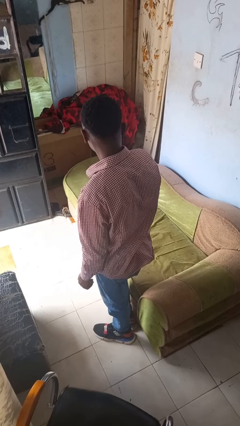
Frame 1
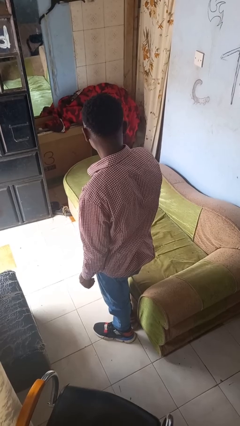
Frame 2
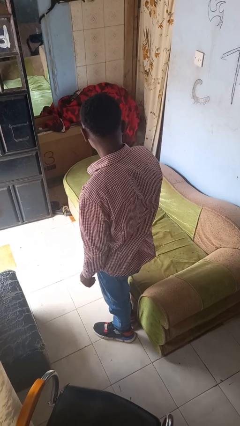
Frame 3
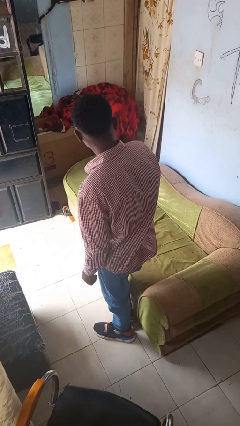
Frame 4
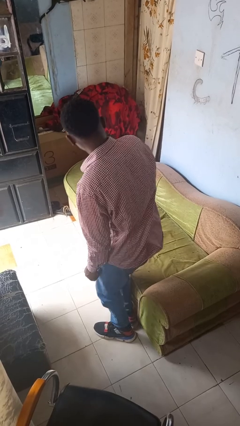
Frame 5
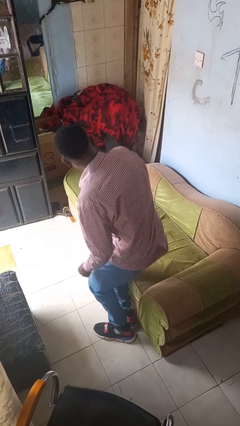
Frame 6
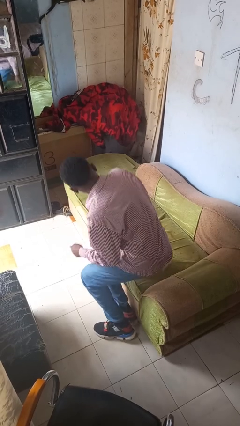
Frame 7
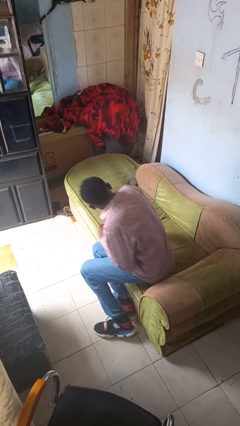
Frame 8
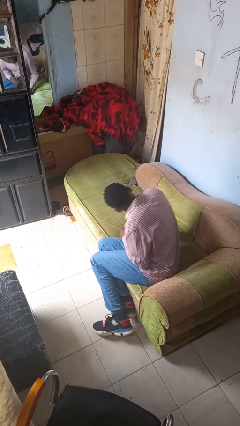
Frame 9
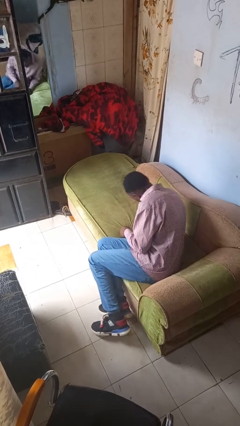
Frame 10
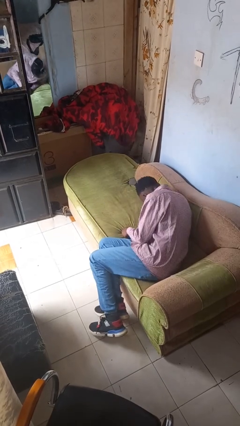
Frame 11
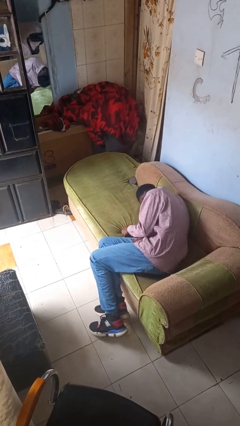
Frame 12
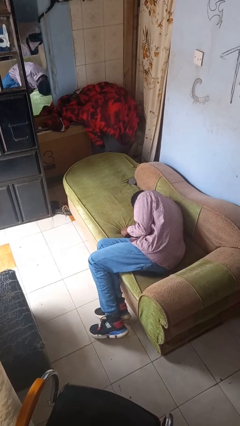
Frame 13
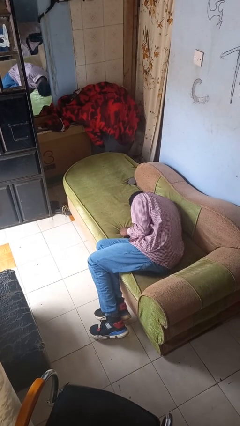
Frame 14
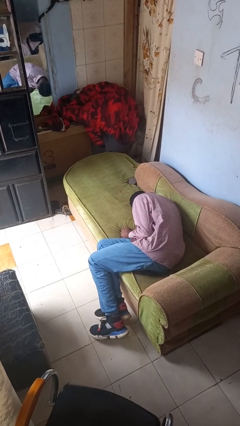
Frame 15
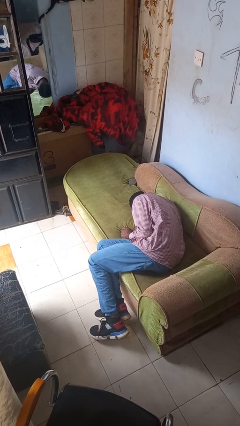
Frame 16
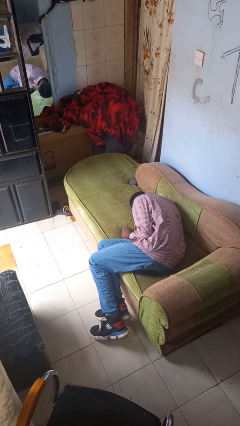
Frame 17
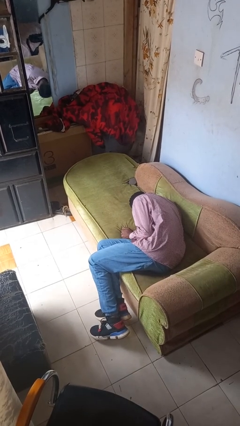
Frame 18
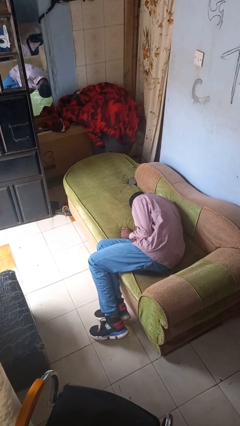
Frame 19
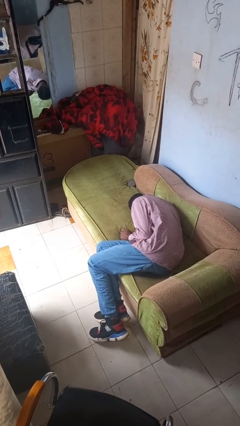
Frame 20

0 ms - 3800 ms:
person lies down on couch

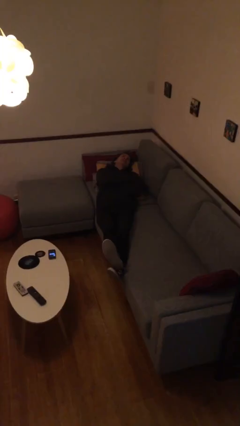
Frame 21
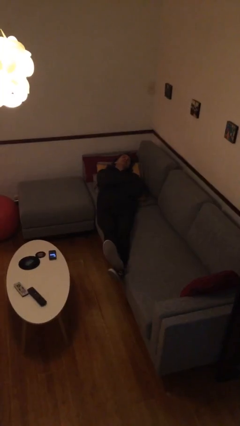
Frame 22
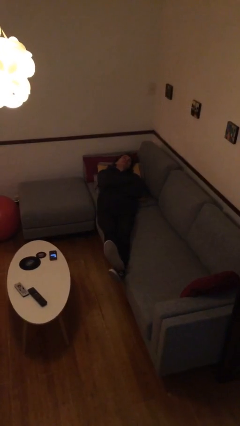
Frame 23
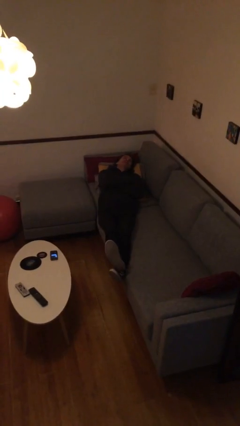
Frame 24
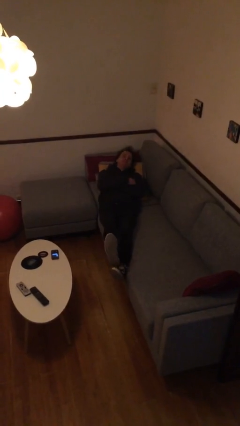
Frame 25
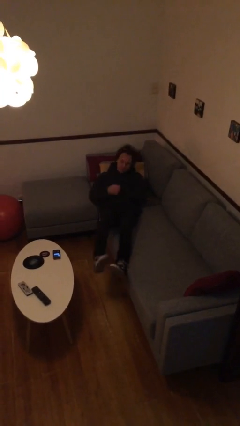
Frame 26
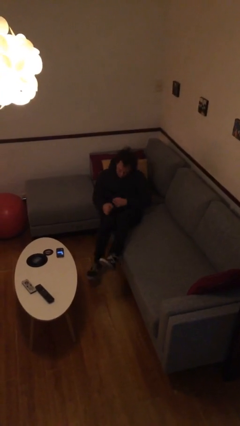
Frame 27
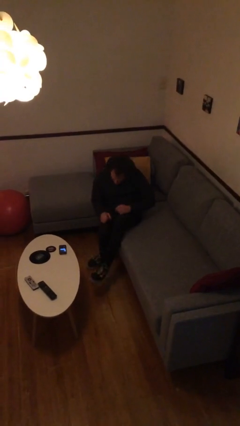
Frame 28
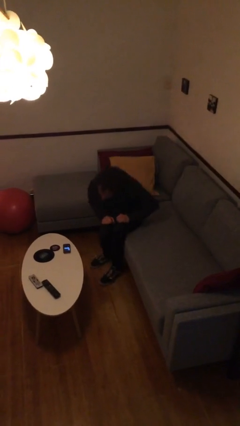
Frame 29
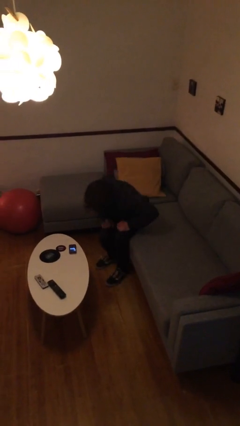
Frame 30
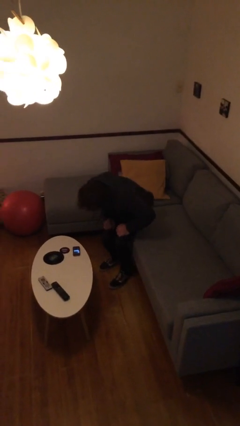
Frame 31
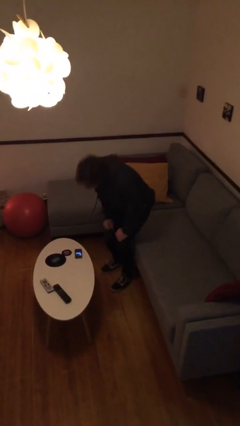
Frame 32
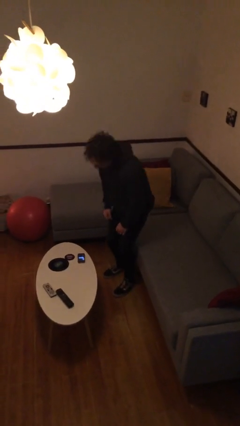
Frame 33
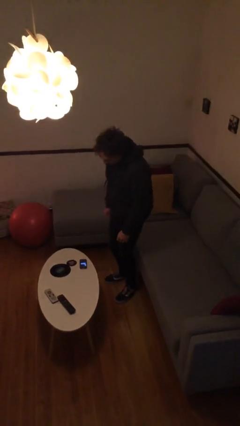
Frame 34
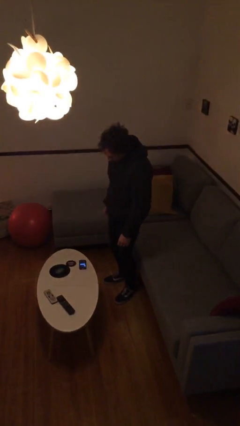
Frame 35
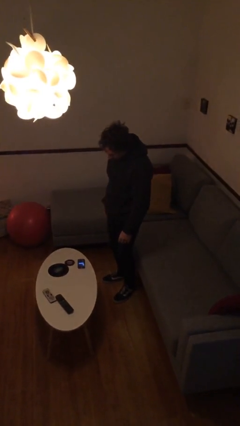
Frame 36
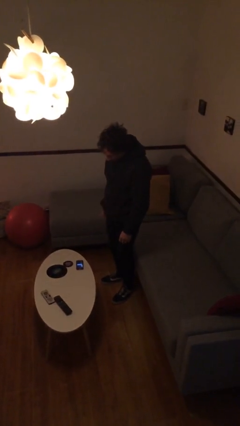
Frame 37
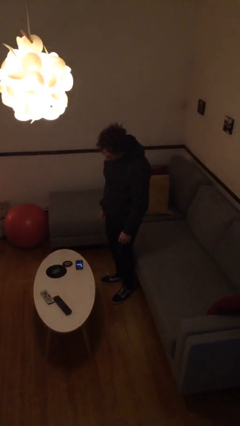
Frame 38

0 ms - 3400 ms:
person stands up

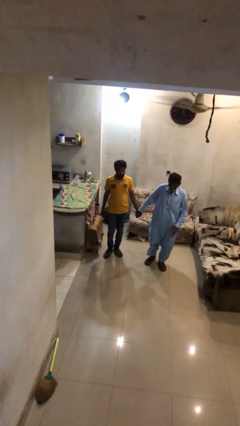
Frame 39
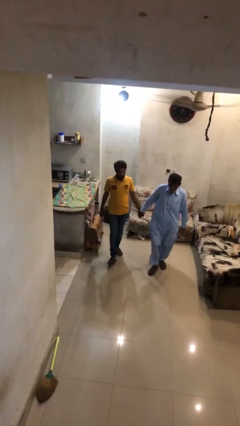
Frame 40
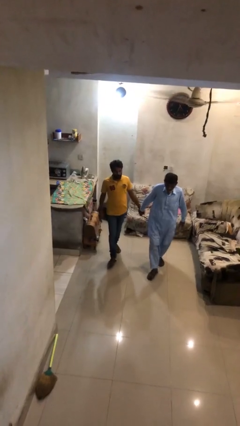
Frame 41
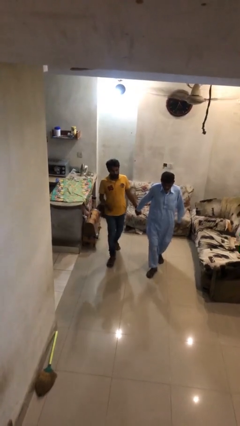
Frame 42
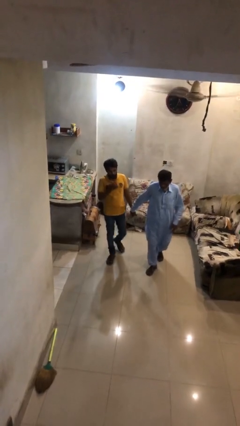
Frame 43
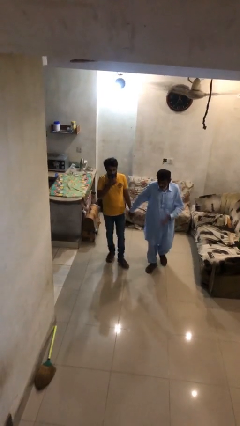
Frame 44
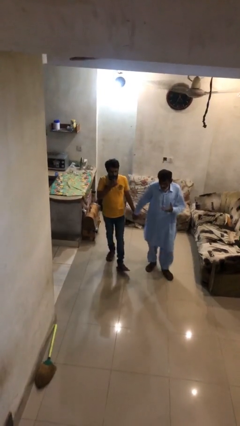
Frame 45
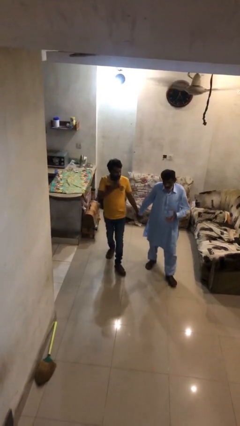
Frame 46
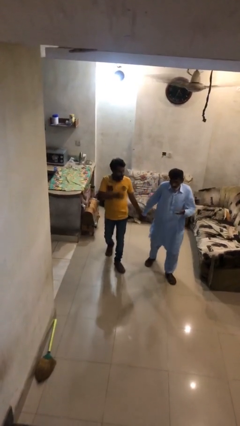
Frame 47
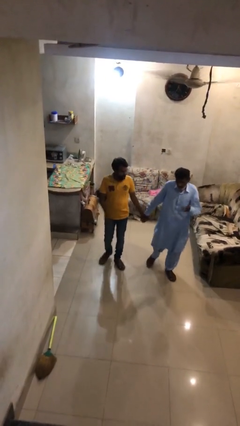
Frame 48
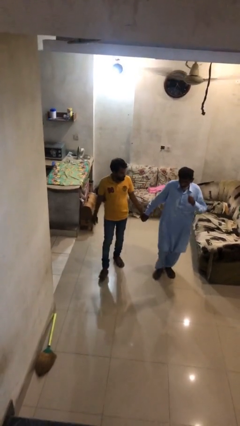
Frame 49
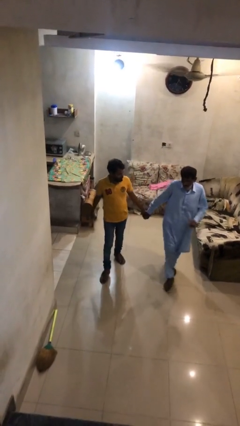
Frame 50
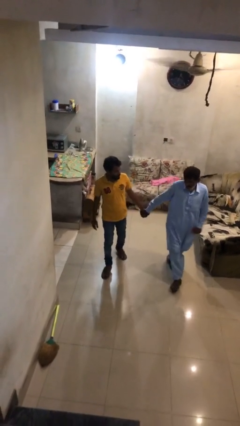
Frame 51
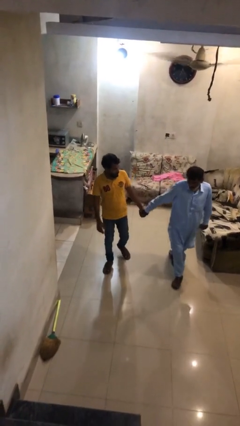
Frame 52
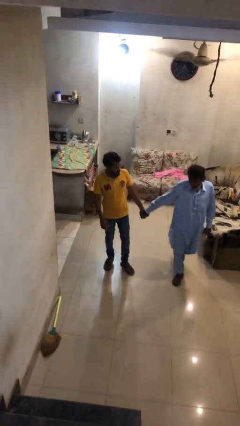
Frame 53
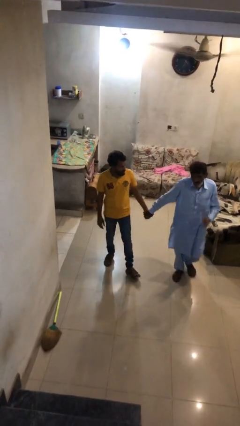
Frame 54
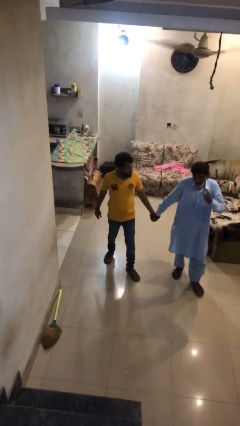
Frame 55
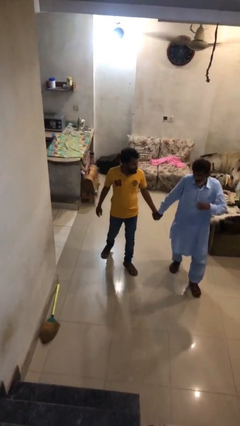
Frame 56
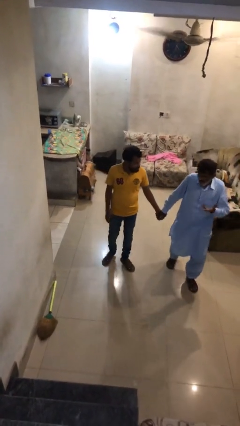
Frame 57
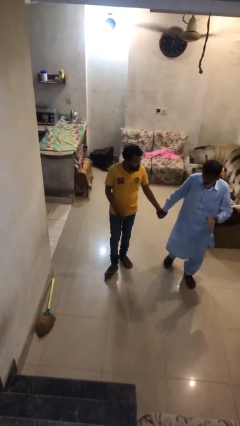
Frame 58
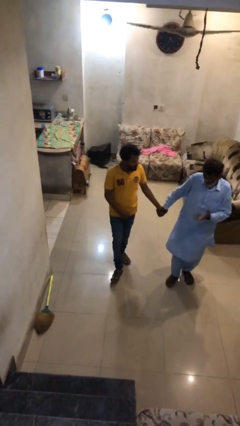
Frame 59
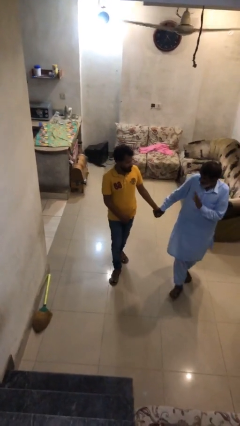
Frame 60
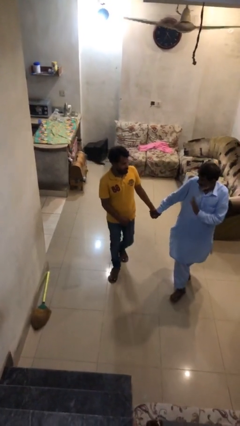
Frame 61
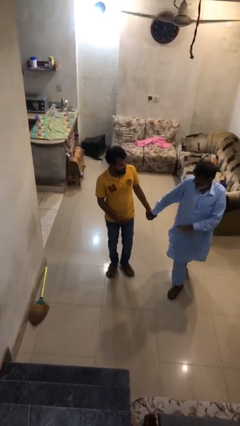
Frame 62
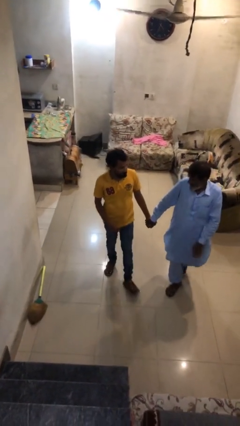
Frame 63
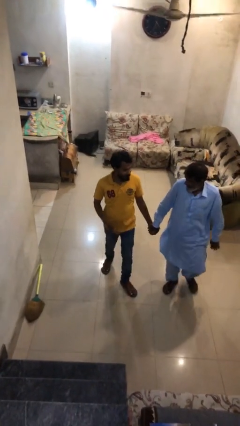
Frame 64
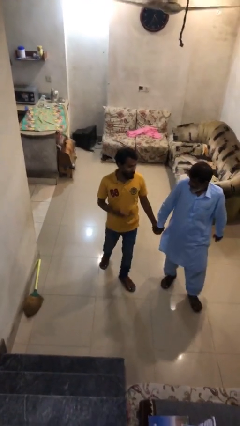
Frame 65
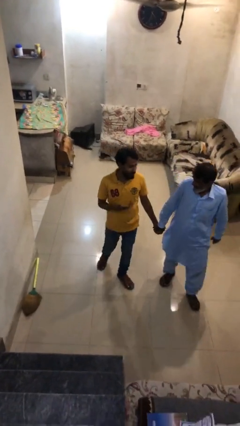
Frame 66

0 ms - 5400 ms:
person holds hand

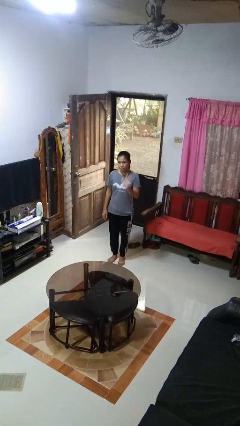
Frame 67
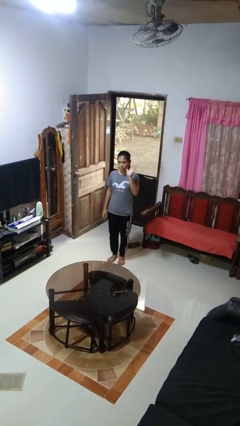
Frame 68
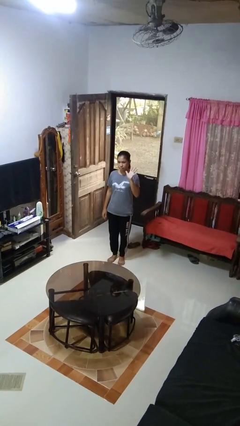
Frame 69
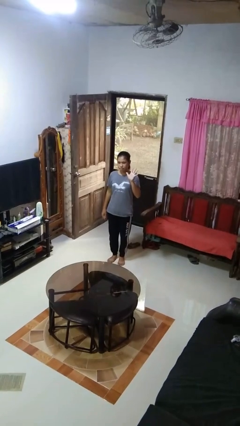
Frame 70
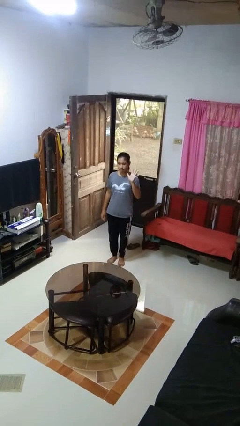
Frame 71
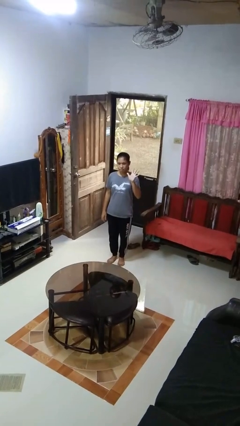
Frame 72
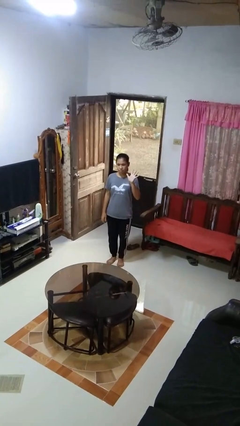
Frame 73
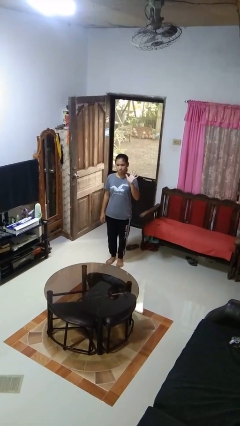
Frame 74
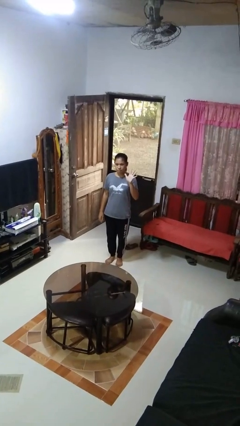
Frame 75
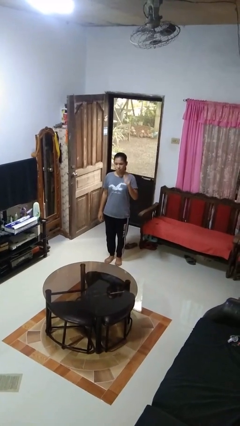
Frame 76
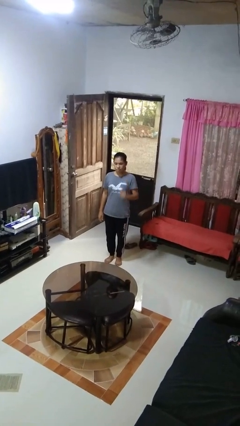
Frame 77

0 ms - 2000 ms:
person gestures number five

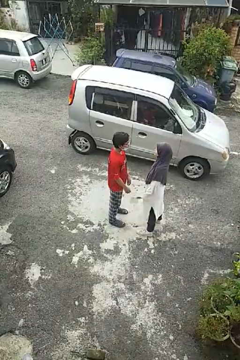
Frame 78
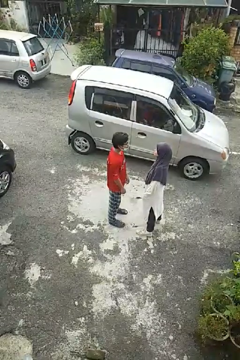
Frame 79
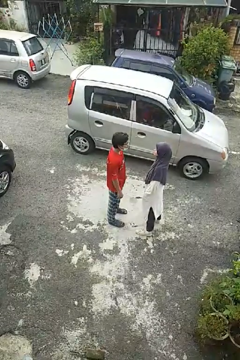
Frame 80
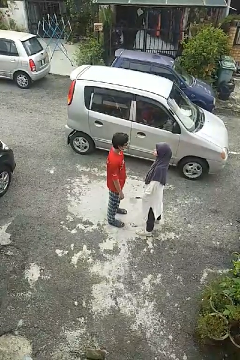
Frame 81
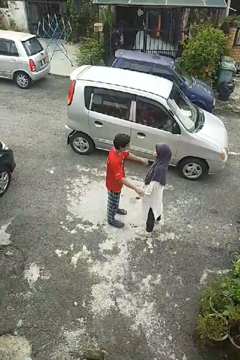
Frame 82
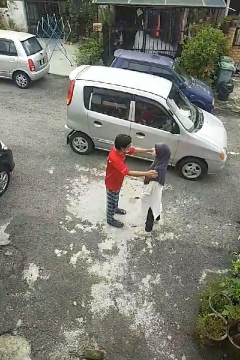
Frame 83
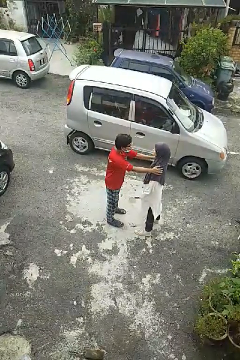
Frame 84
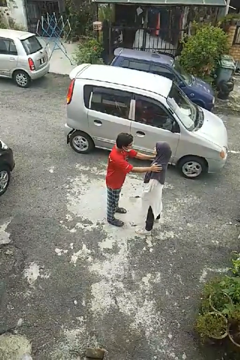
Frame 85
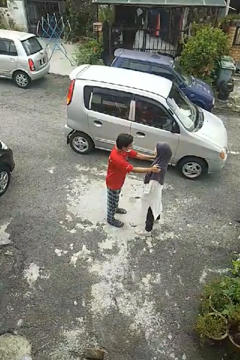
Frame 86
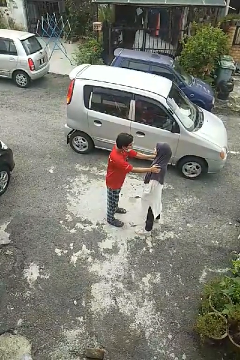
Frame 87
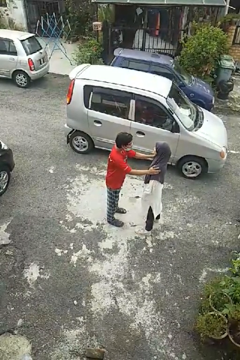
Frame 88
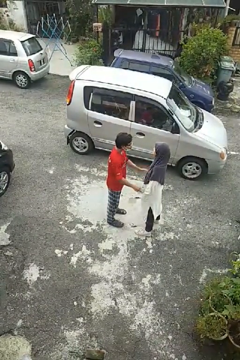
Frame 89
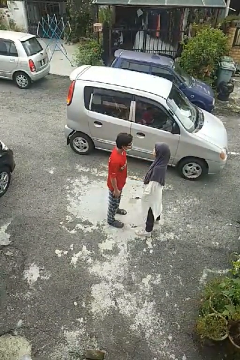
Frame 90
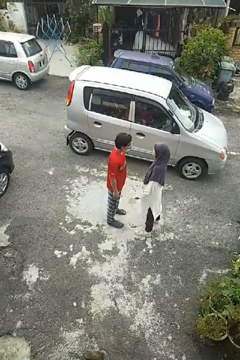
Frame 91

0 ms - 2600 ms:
person pounds shoulders of person

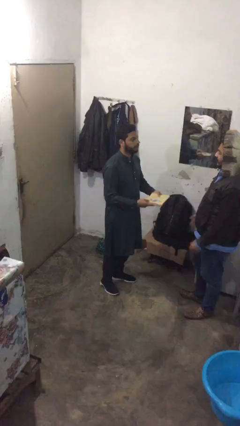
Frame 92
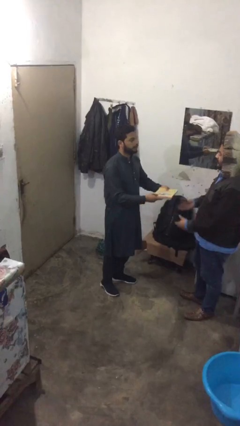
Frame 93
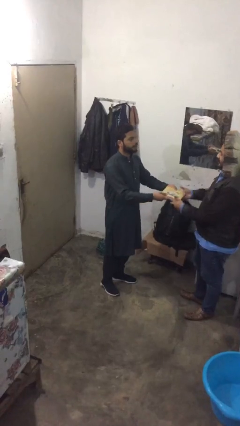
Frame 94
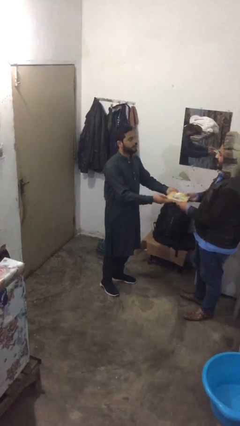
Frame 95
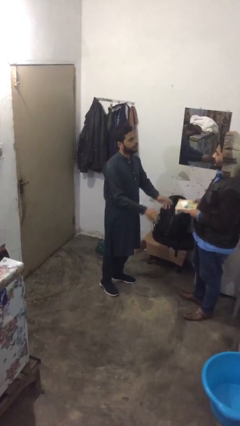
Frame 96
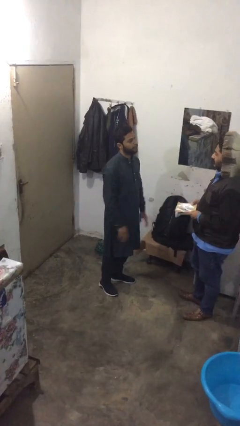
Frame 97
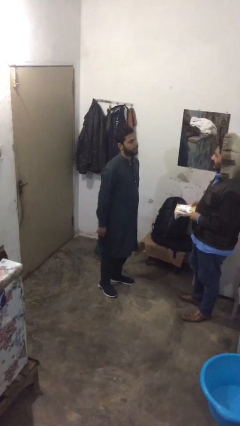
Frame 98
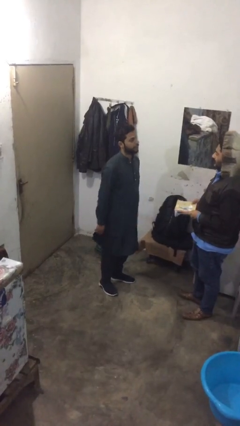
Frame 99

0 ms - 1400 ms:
person transfers object to person
